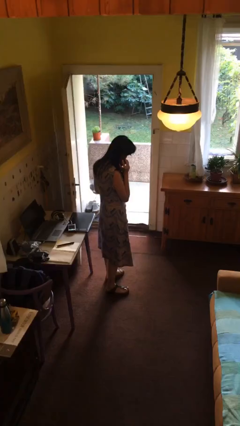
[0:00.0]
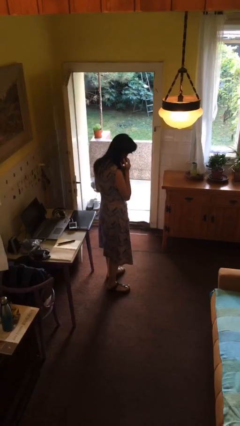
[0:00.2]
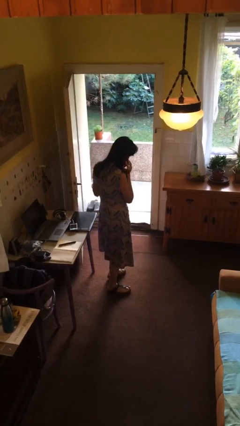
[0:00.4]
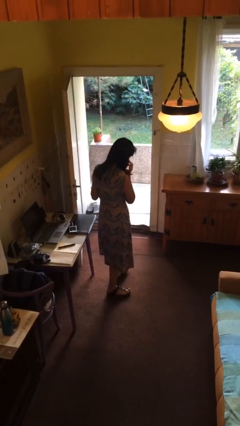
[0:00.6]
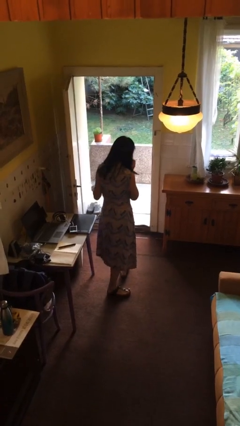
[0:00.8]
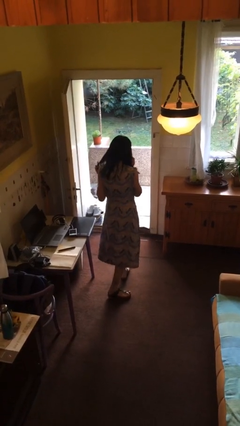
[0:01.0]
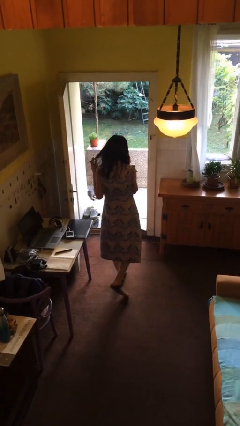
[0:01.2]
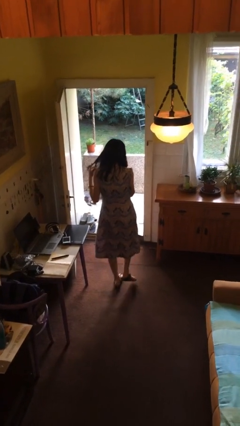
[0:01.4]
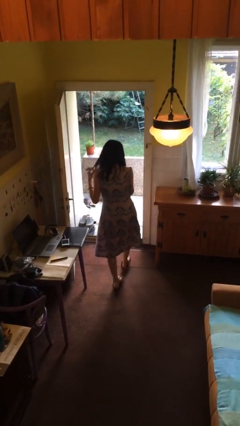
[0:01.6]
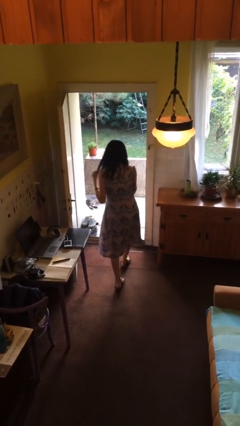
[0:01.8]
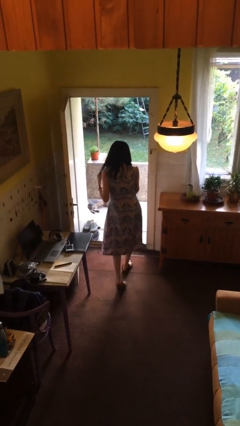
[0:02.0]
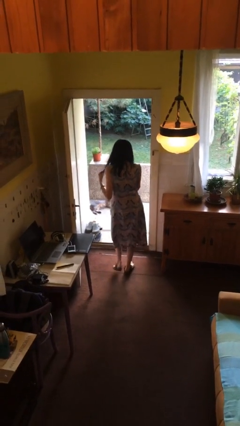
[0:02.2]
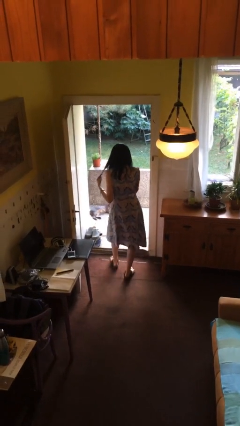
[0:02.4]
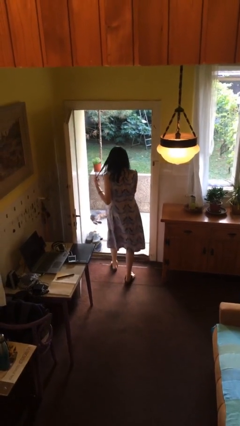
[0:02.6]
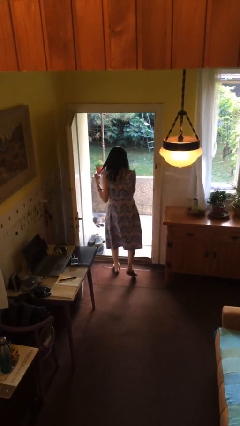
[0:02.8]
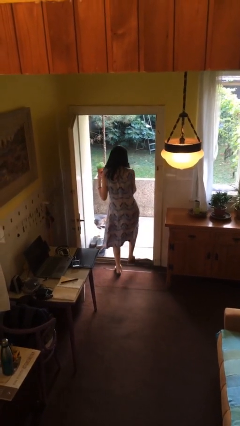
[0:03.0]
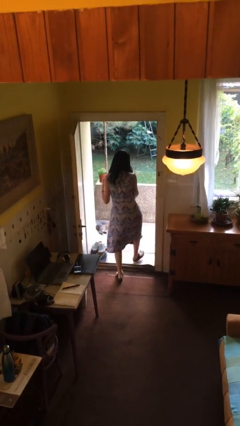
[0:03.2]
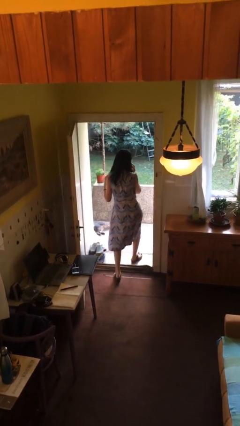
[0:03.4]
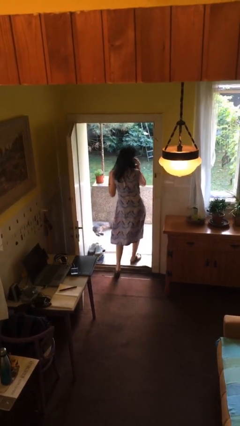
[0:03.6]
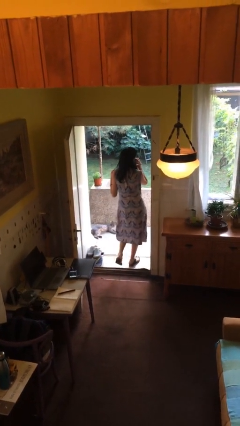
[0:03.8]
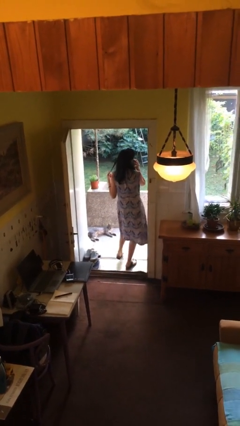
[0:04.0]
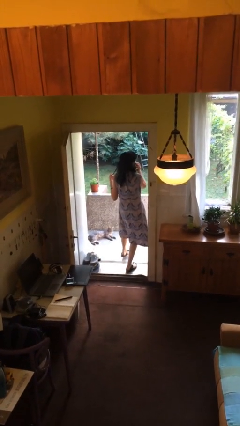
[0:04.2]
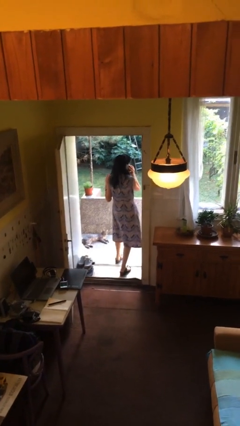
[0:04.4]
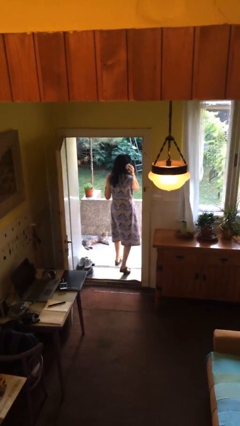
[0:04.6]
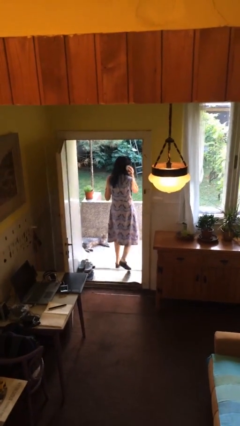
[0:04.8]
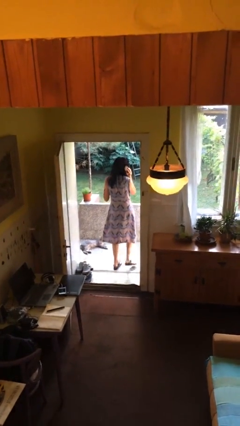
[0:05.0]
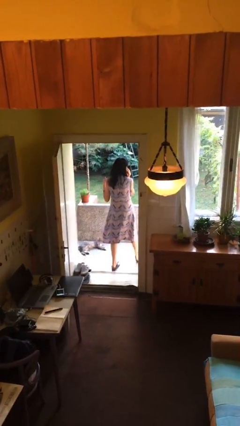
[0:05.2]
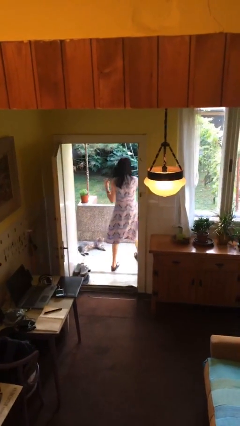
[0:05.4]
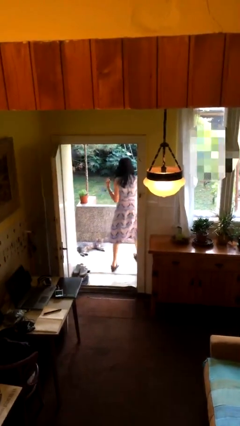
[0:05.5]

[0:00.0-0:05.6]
person exits scene through structure

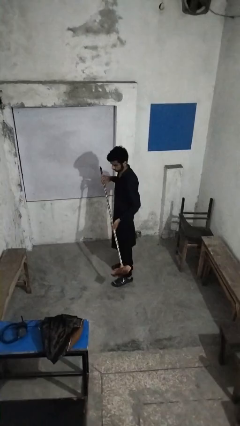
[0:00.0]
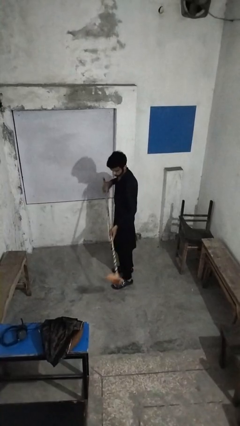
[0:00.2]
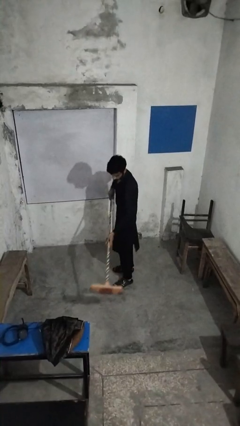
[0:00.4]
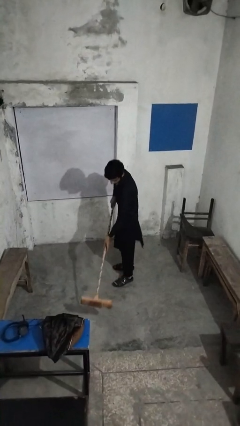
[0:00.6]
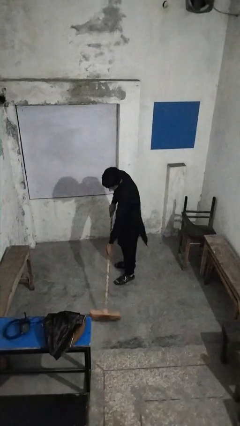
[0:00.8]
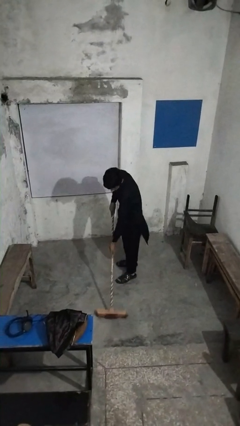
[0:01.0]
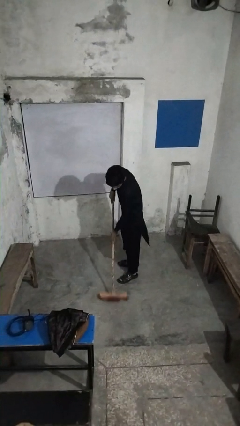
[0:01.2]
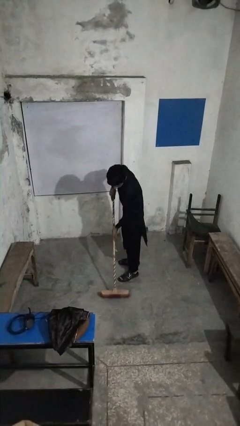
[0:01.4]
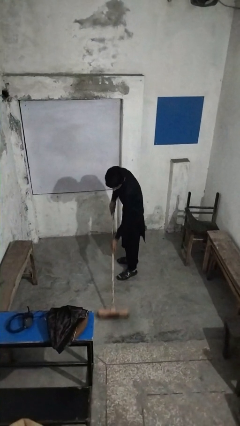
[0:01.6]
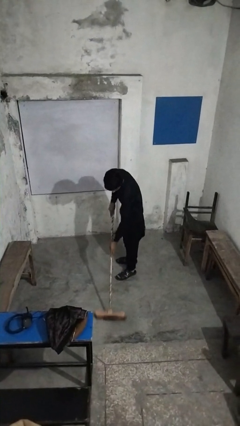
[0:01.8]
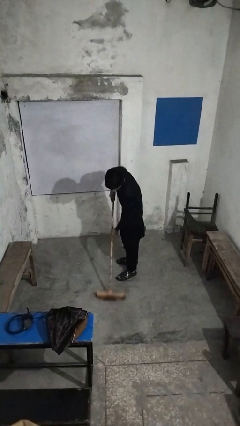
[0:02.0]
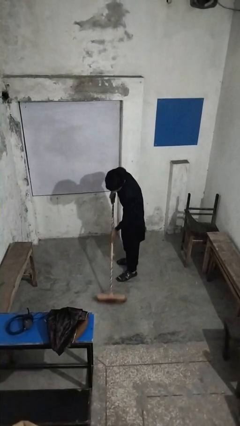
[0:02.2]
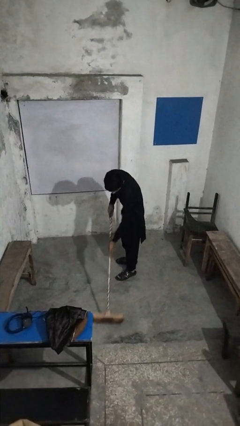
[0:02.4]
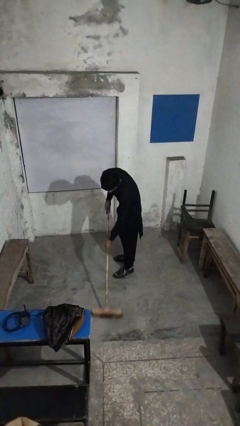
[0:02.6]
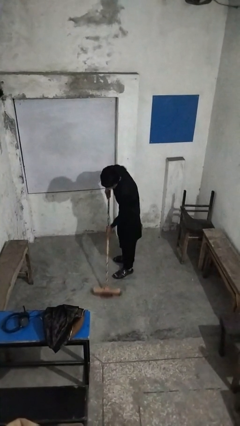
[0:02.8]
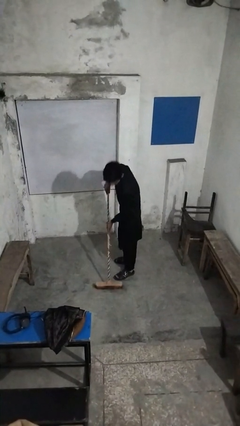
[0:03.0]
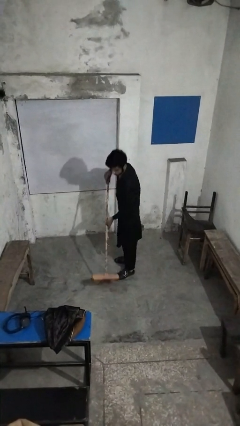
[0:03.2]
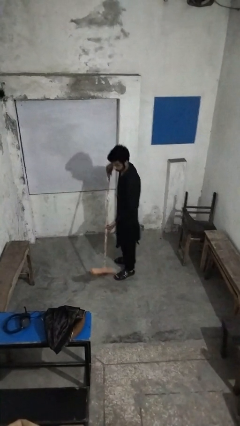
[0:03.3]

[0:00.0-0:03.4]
person sweeps floor

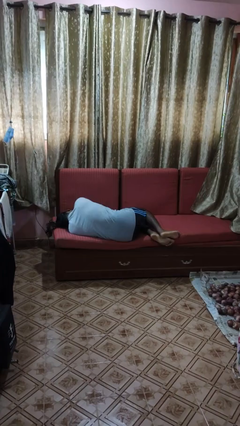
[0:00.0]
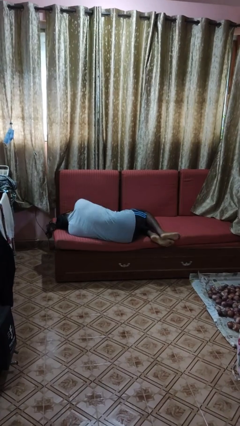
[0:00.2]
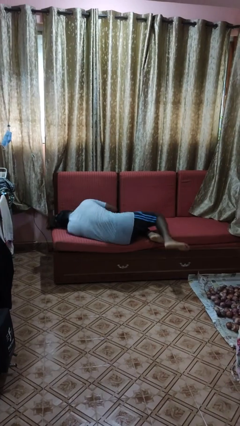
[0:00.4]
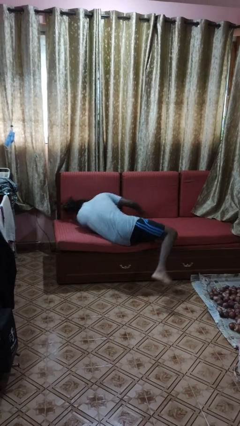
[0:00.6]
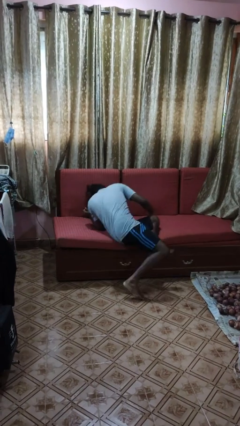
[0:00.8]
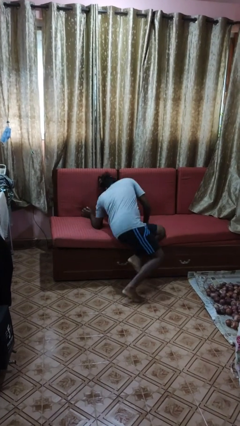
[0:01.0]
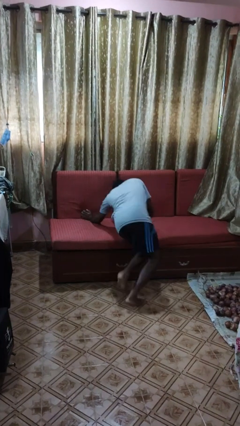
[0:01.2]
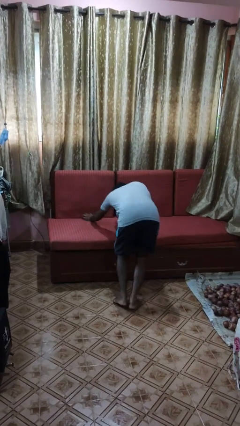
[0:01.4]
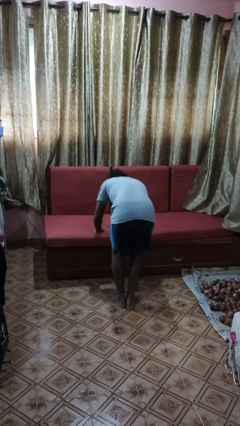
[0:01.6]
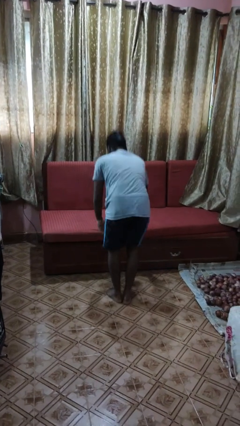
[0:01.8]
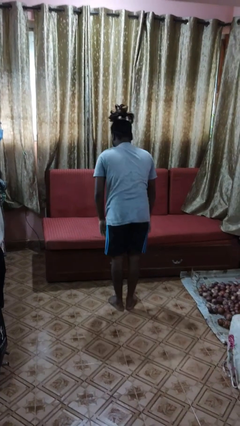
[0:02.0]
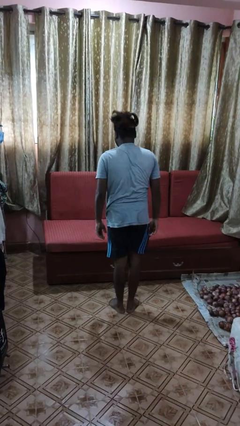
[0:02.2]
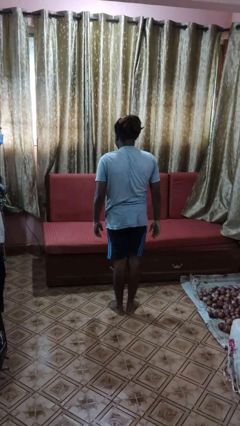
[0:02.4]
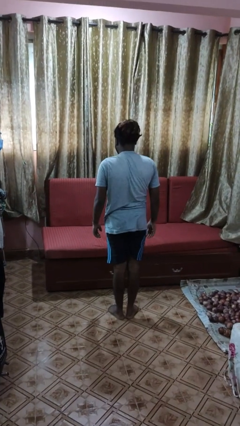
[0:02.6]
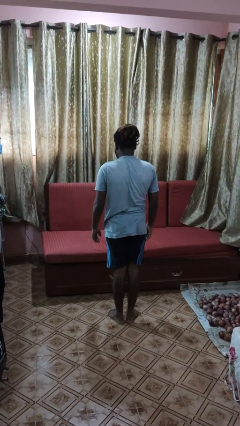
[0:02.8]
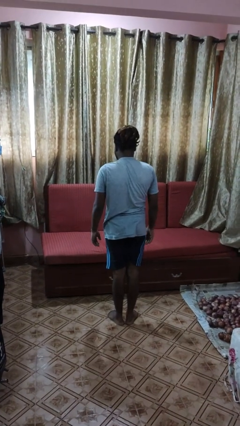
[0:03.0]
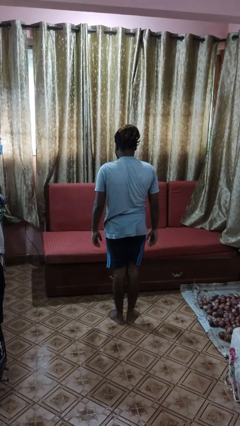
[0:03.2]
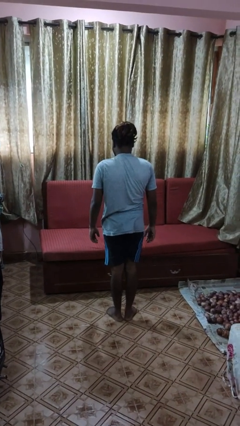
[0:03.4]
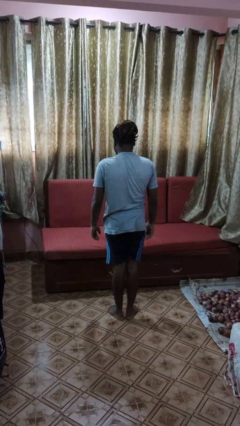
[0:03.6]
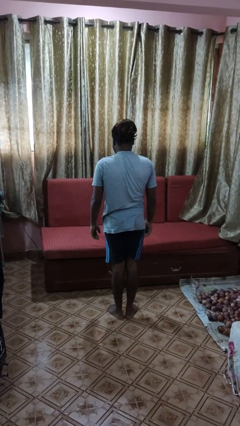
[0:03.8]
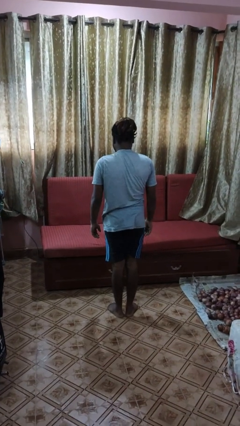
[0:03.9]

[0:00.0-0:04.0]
person stands up

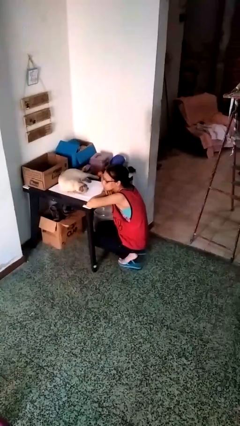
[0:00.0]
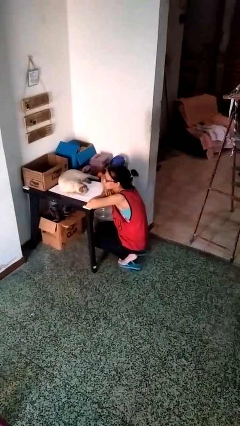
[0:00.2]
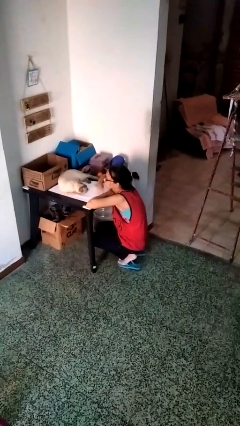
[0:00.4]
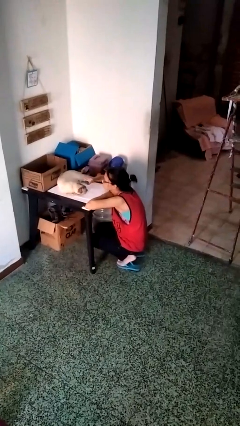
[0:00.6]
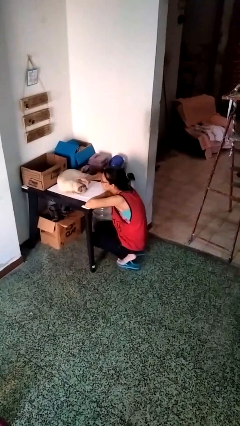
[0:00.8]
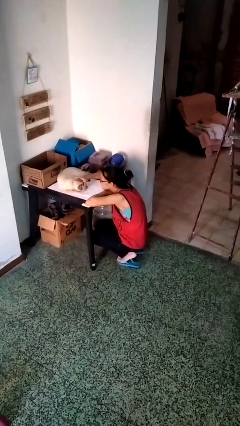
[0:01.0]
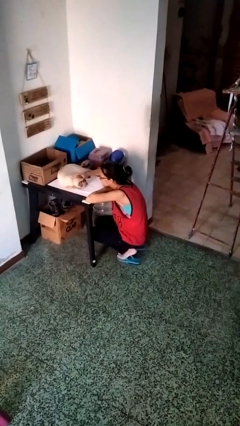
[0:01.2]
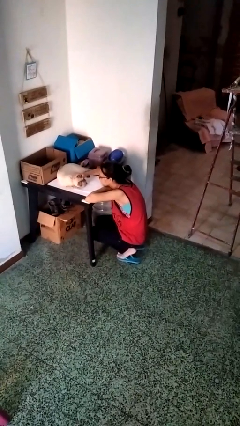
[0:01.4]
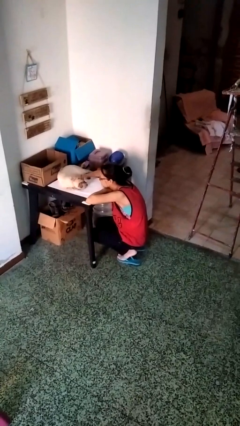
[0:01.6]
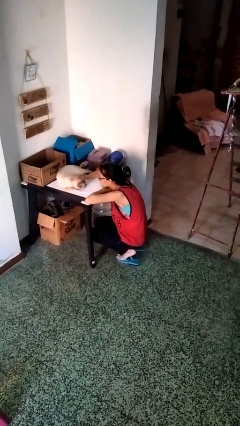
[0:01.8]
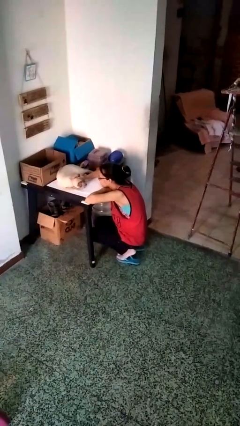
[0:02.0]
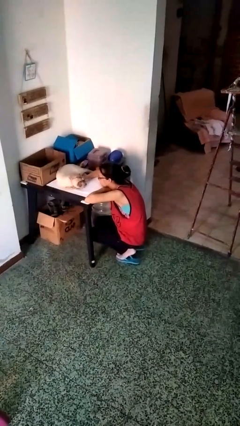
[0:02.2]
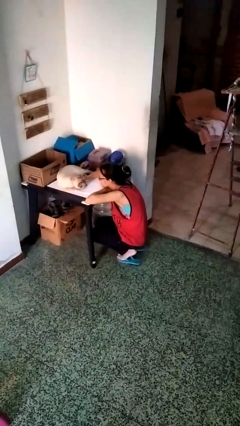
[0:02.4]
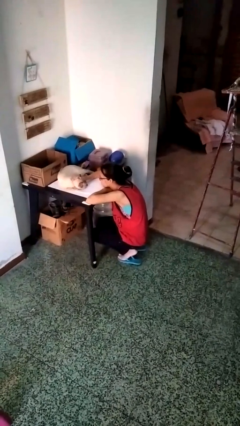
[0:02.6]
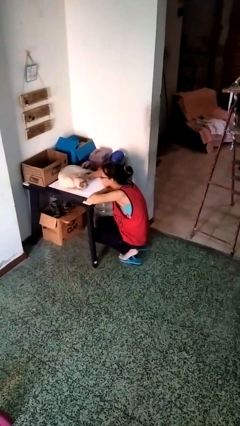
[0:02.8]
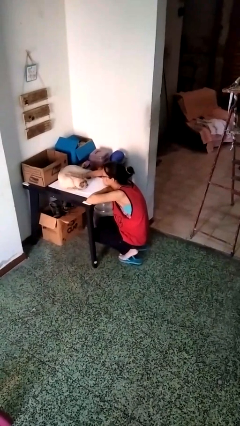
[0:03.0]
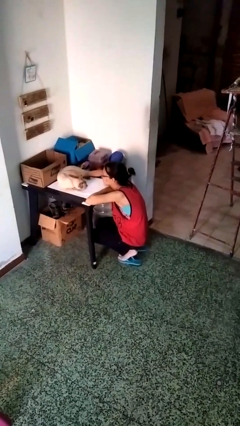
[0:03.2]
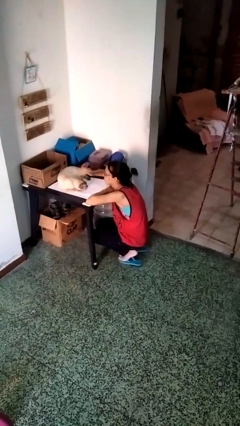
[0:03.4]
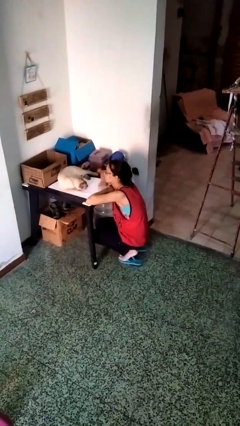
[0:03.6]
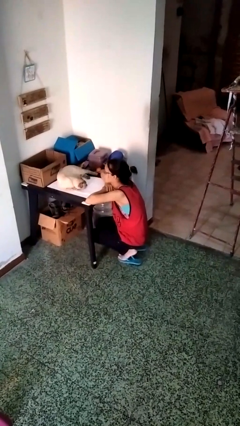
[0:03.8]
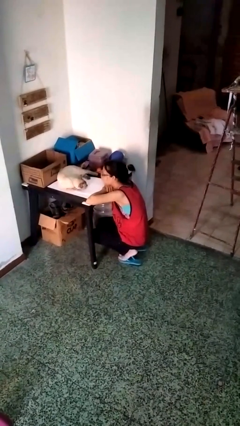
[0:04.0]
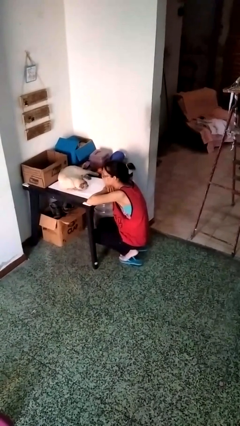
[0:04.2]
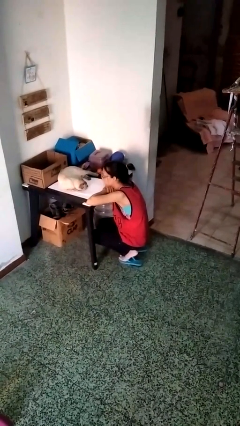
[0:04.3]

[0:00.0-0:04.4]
person pets cat
